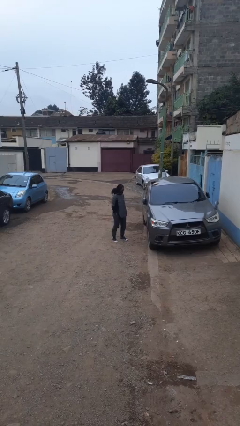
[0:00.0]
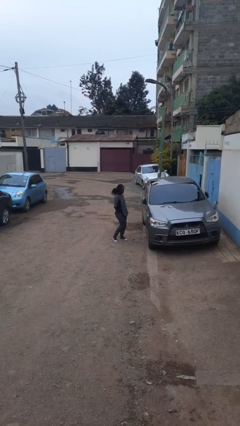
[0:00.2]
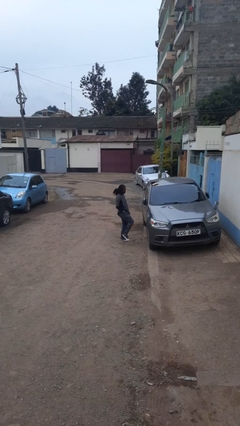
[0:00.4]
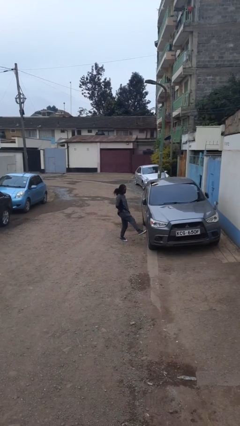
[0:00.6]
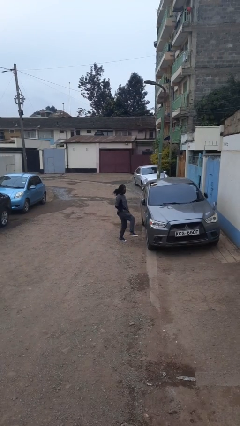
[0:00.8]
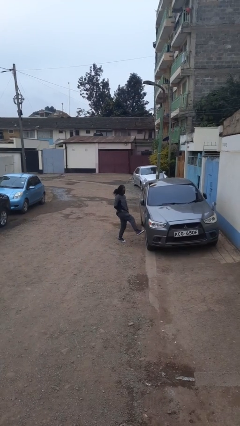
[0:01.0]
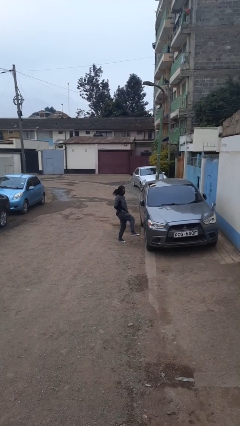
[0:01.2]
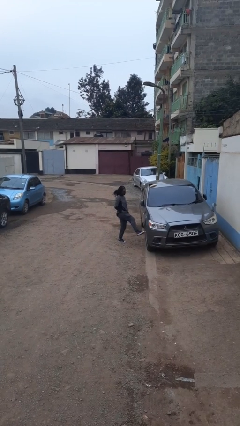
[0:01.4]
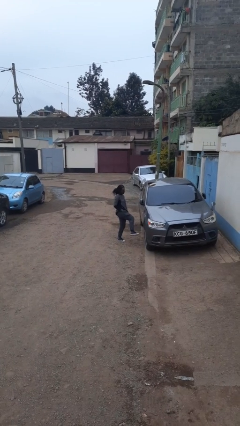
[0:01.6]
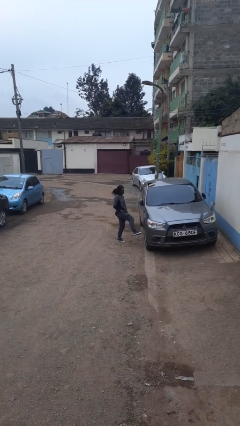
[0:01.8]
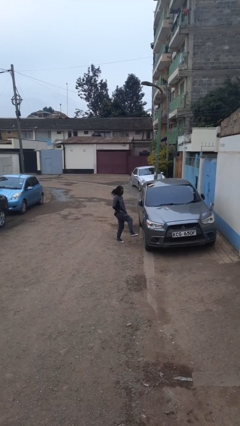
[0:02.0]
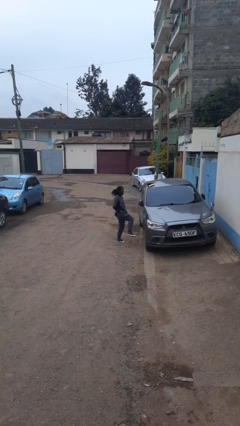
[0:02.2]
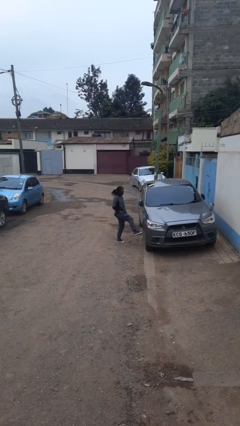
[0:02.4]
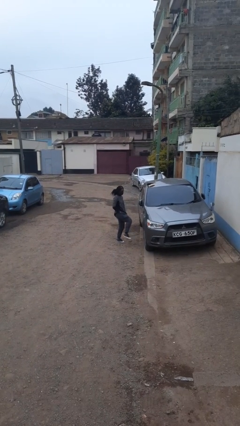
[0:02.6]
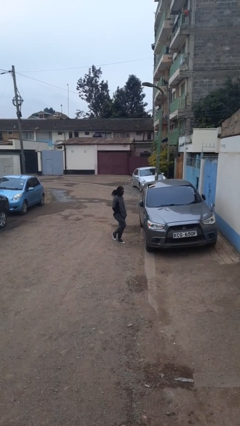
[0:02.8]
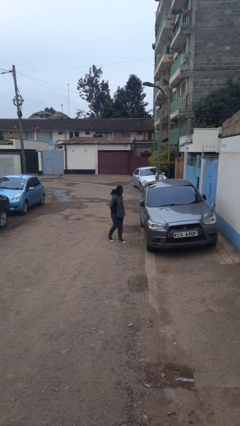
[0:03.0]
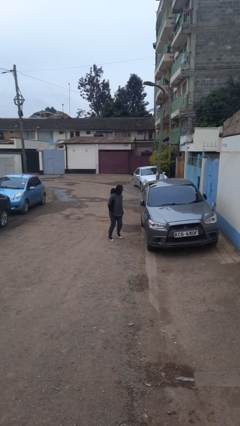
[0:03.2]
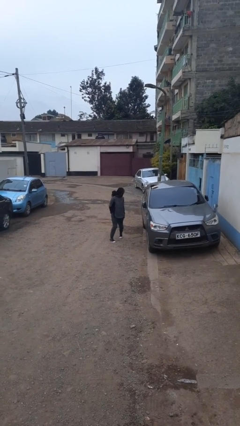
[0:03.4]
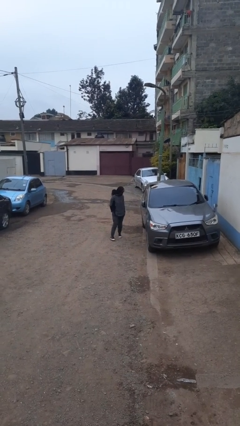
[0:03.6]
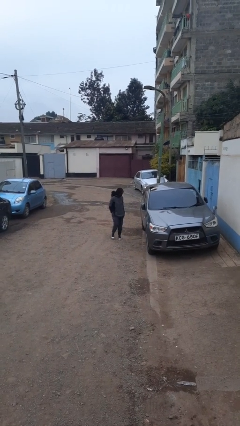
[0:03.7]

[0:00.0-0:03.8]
person kicks car tires

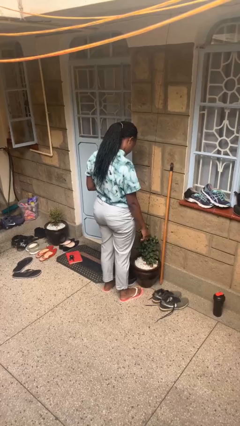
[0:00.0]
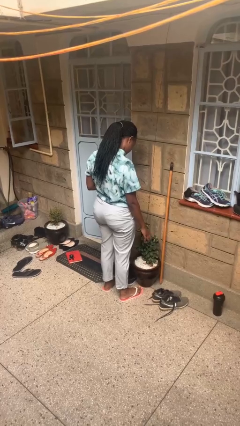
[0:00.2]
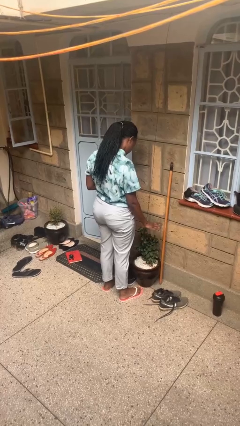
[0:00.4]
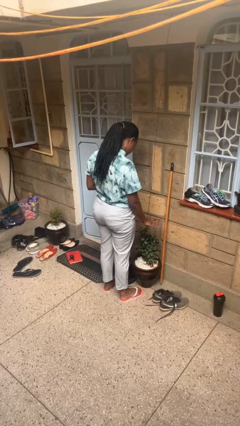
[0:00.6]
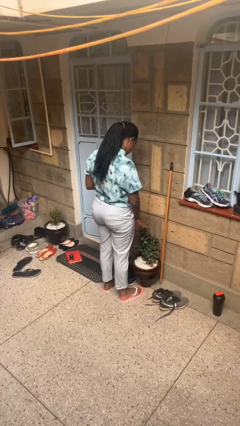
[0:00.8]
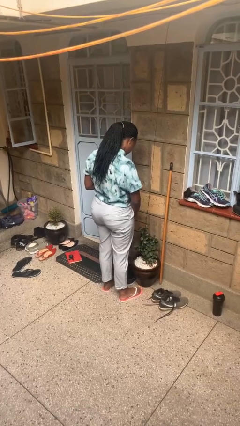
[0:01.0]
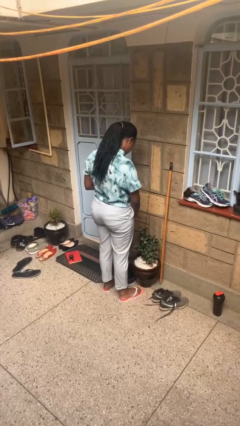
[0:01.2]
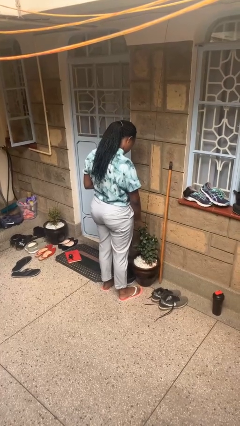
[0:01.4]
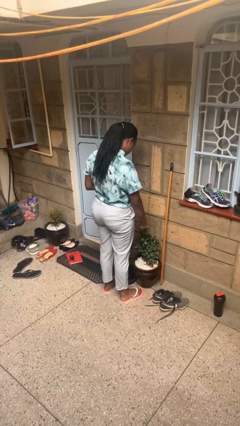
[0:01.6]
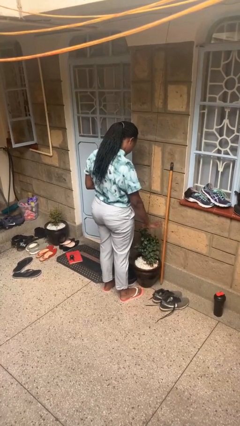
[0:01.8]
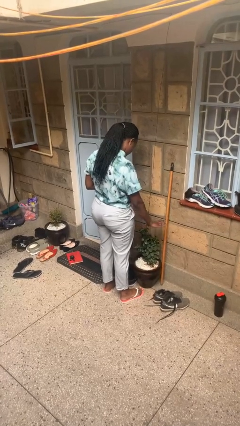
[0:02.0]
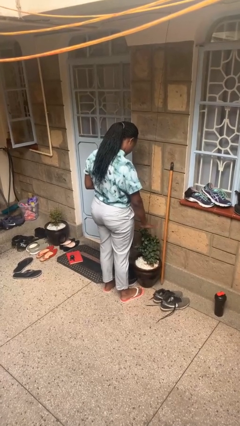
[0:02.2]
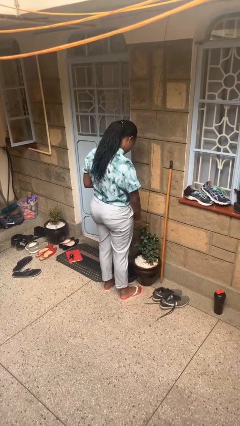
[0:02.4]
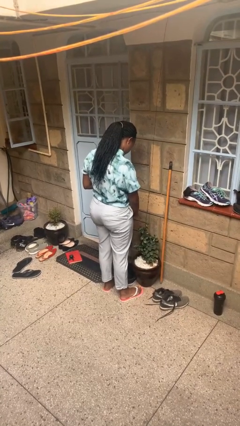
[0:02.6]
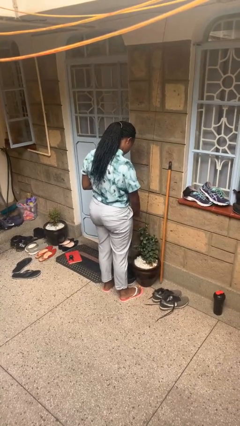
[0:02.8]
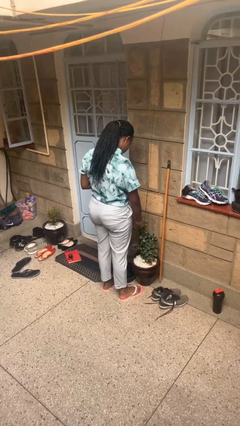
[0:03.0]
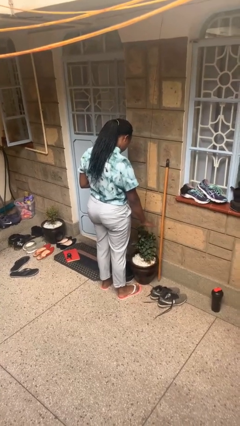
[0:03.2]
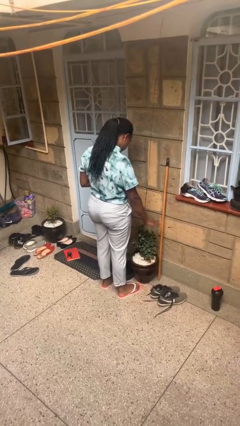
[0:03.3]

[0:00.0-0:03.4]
person waves hand over object

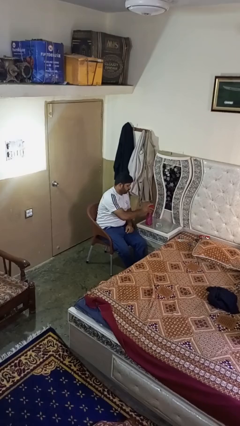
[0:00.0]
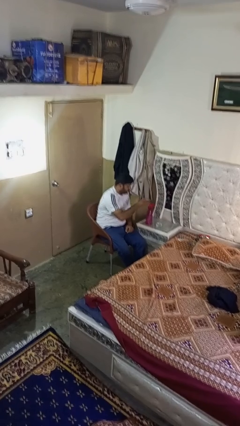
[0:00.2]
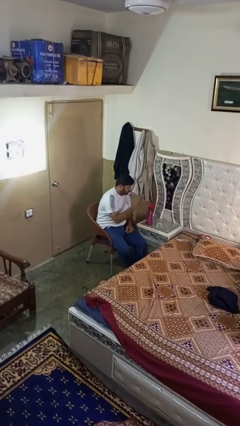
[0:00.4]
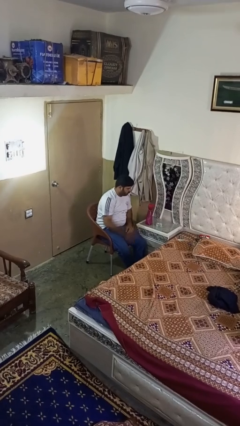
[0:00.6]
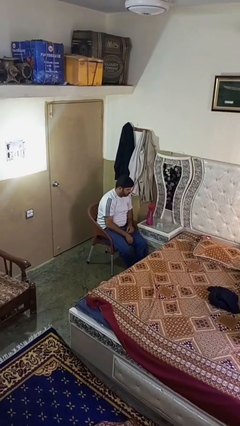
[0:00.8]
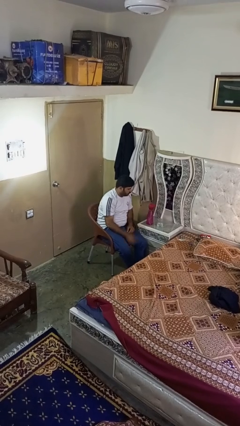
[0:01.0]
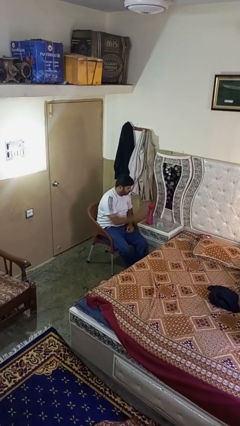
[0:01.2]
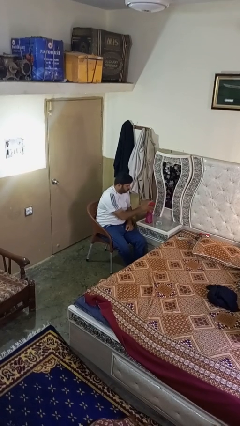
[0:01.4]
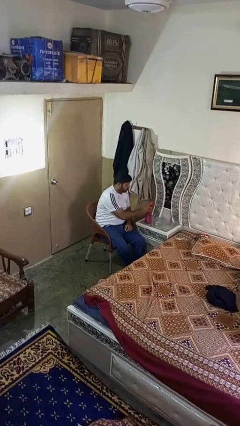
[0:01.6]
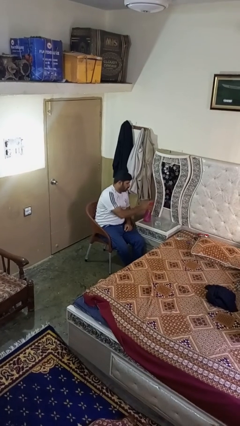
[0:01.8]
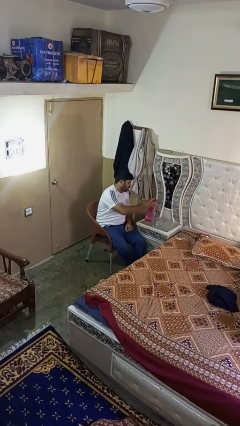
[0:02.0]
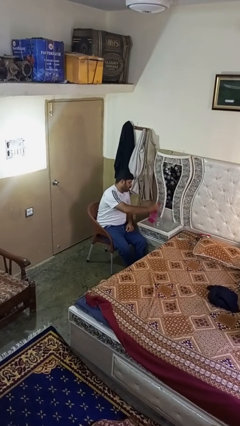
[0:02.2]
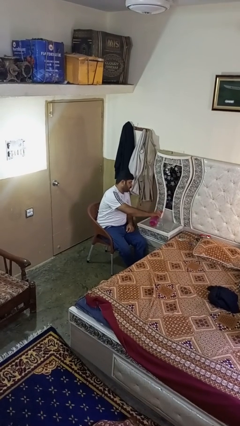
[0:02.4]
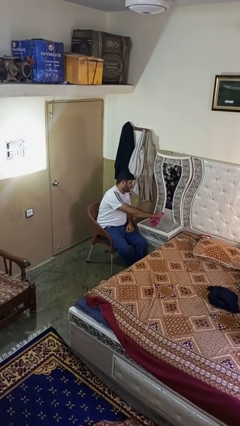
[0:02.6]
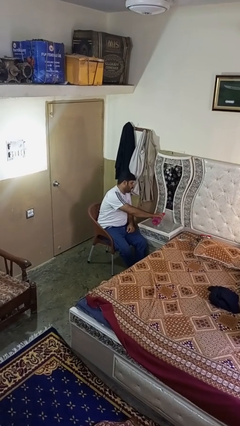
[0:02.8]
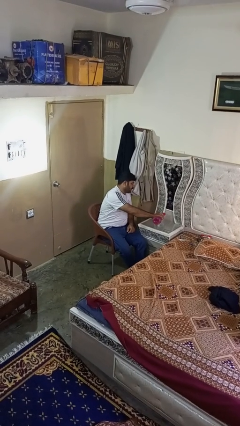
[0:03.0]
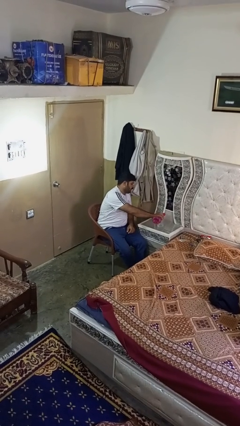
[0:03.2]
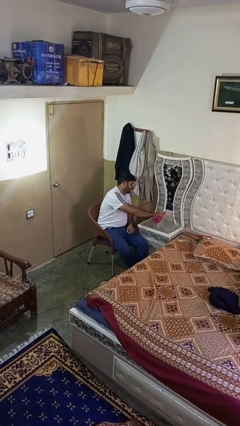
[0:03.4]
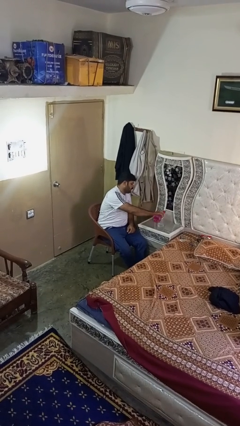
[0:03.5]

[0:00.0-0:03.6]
person pours liquid into cup

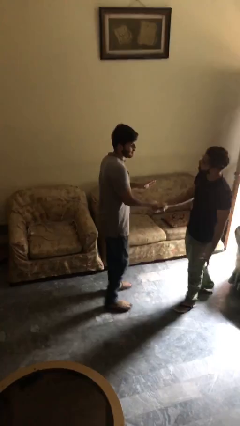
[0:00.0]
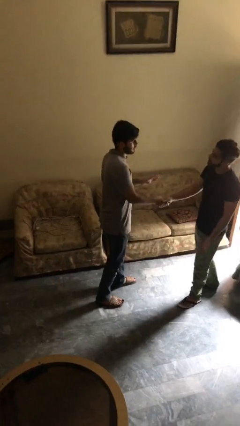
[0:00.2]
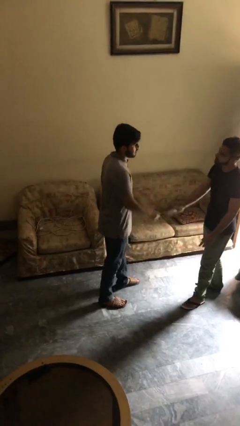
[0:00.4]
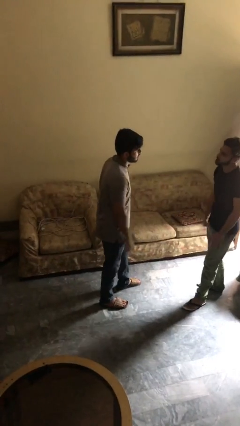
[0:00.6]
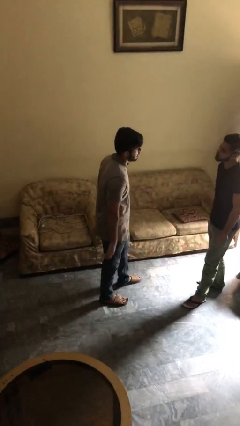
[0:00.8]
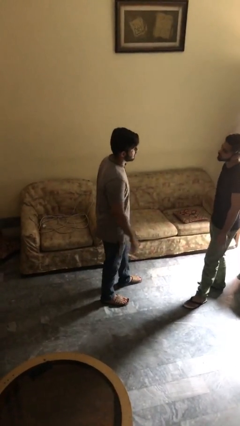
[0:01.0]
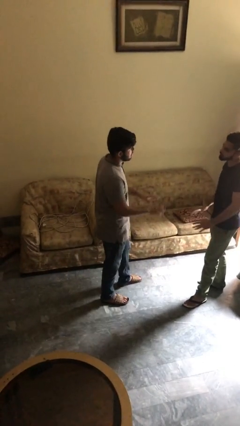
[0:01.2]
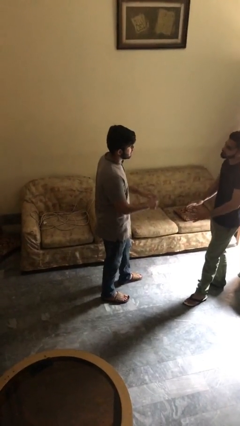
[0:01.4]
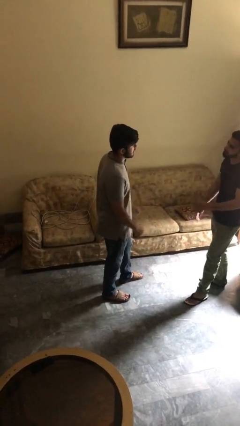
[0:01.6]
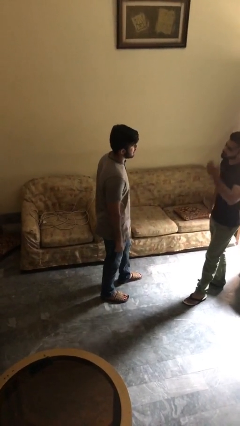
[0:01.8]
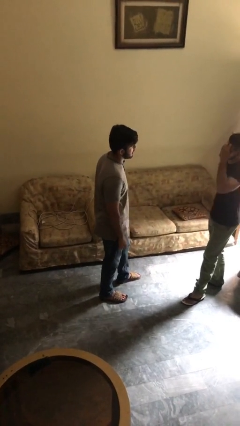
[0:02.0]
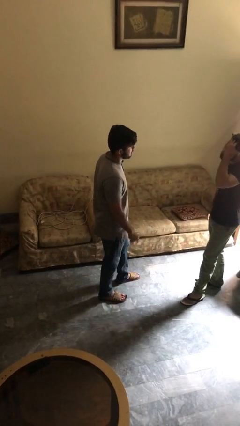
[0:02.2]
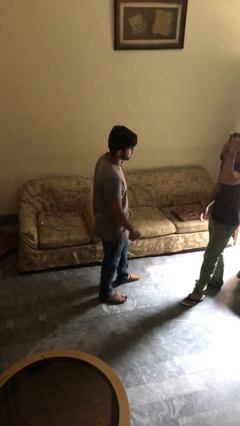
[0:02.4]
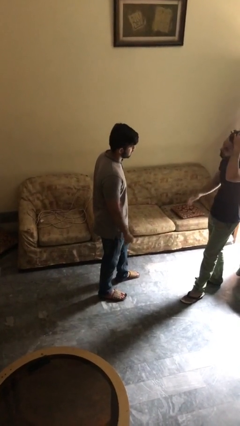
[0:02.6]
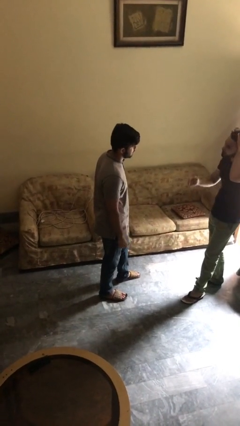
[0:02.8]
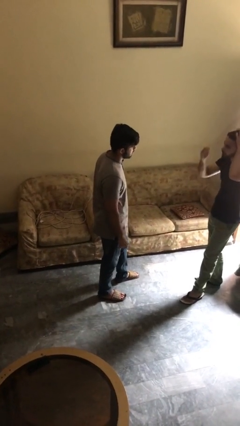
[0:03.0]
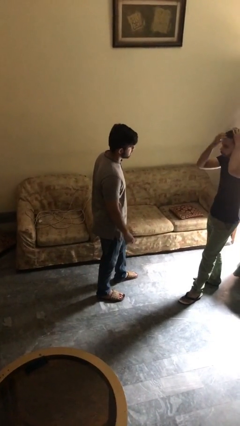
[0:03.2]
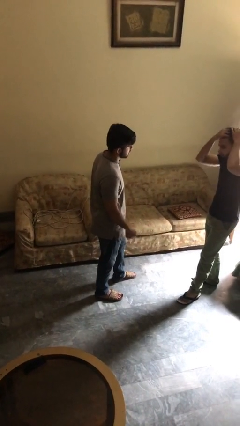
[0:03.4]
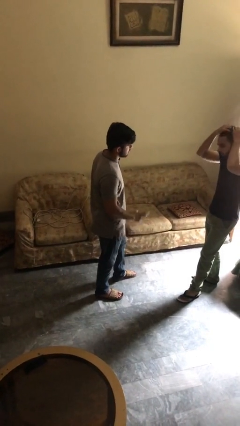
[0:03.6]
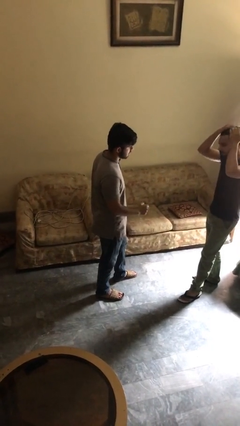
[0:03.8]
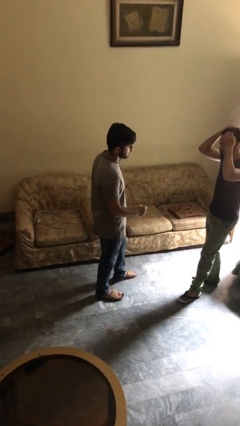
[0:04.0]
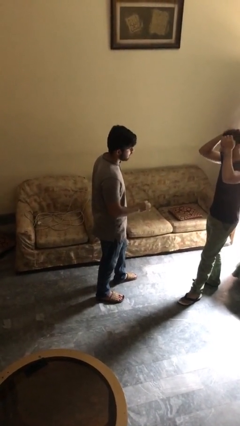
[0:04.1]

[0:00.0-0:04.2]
person talks to person

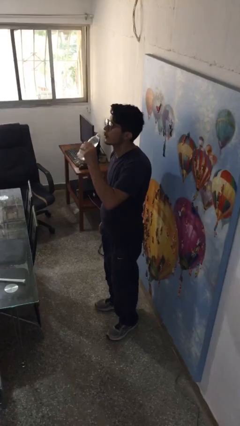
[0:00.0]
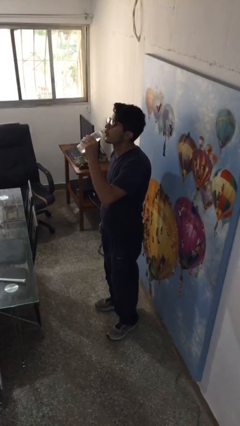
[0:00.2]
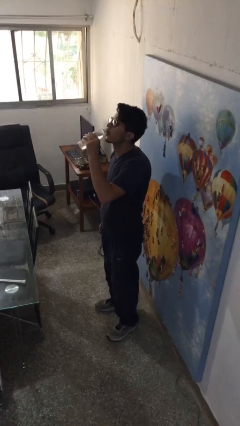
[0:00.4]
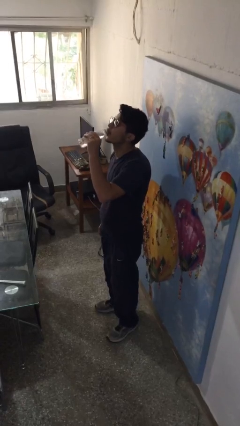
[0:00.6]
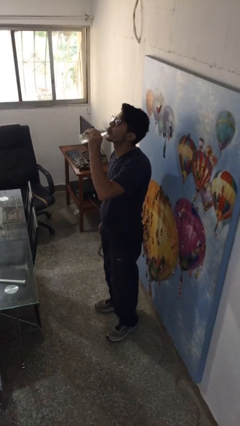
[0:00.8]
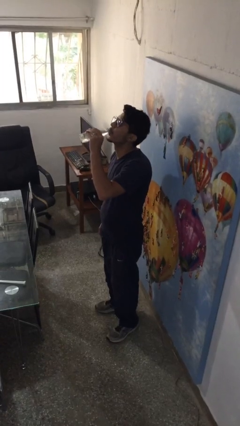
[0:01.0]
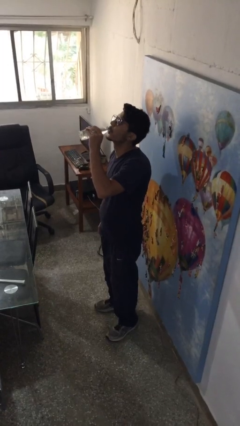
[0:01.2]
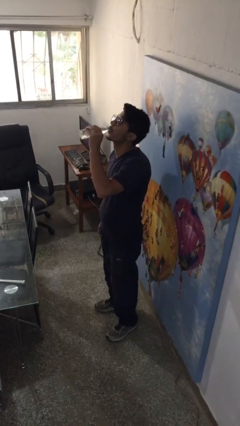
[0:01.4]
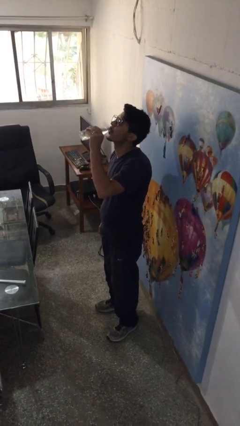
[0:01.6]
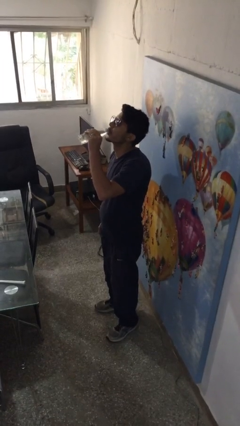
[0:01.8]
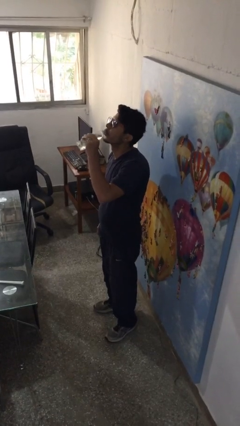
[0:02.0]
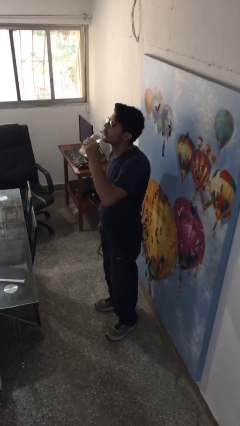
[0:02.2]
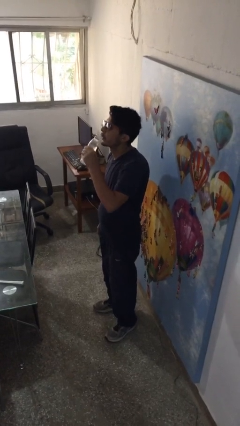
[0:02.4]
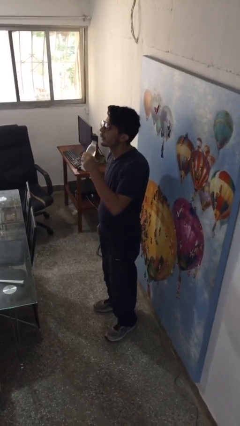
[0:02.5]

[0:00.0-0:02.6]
person drinks from bottle
